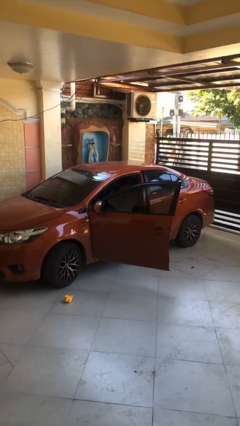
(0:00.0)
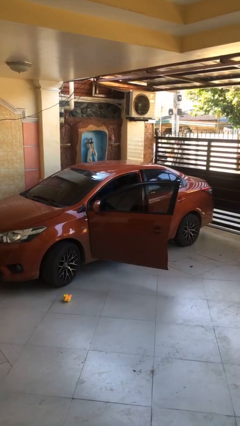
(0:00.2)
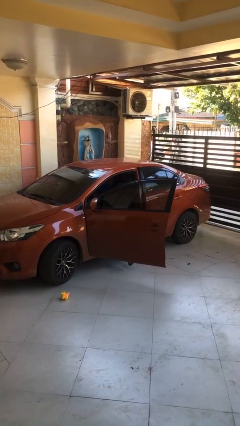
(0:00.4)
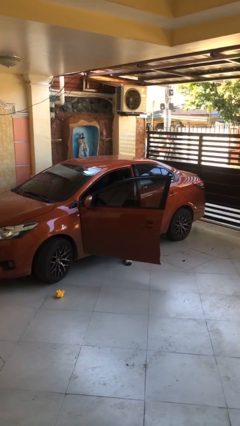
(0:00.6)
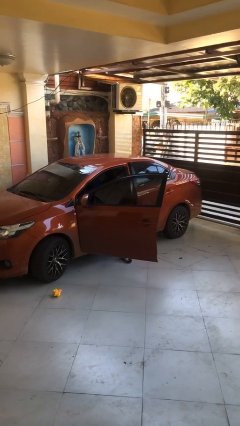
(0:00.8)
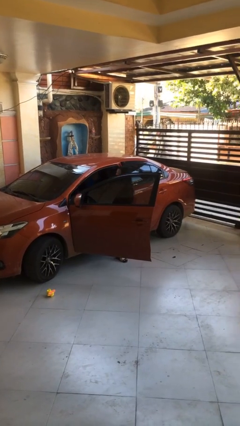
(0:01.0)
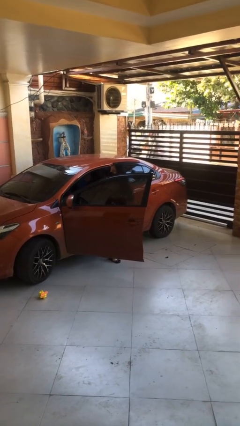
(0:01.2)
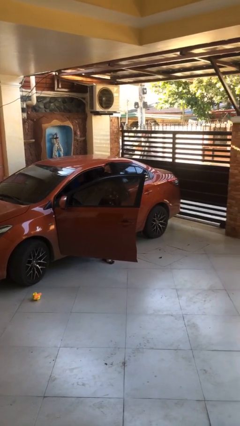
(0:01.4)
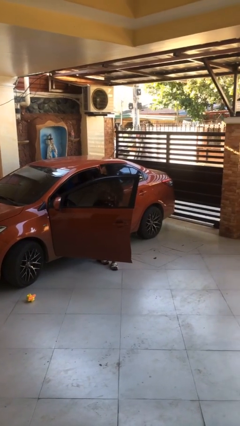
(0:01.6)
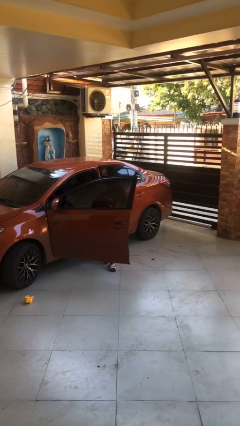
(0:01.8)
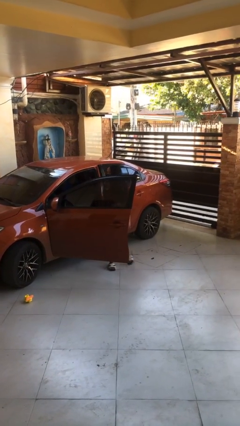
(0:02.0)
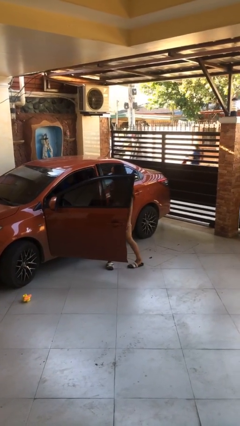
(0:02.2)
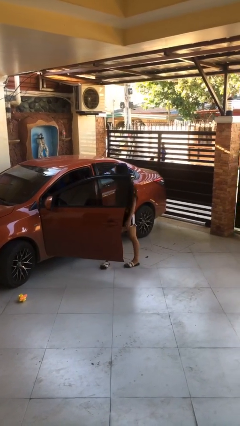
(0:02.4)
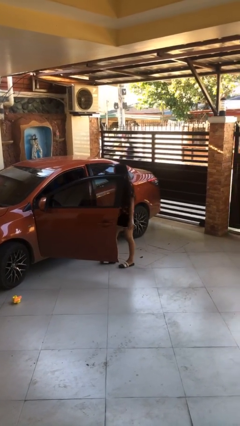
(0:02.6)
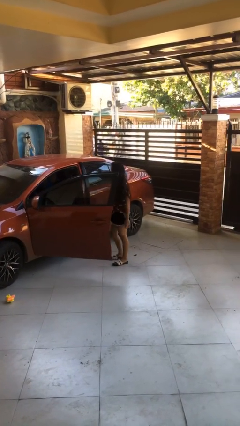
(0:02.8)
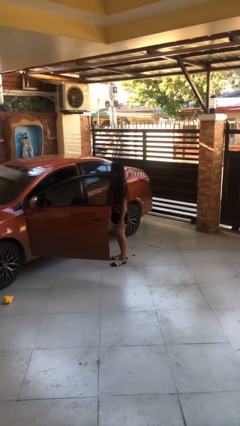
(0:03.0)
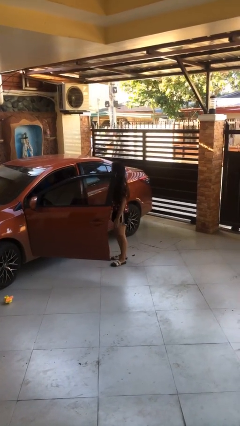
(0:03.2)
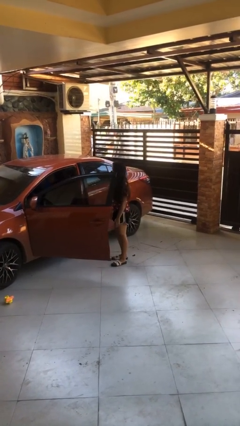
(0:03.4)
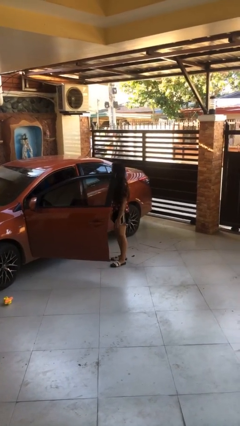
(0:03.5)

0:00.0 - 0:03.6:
person exits car

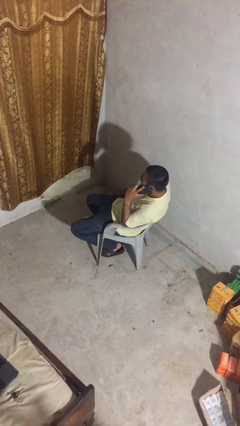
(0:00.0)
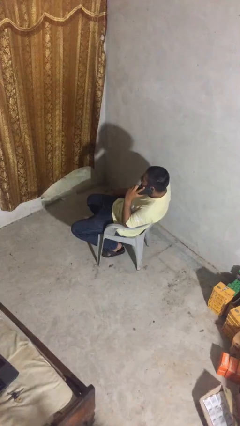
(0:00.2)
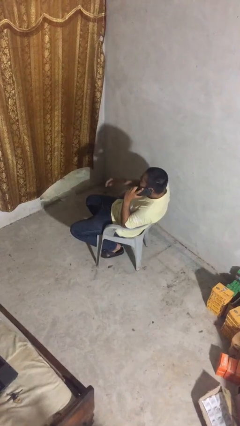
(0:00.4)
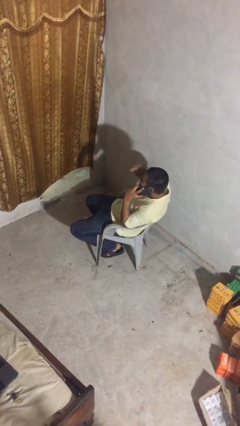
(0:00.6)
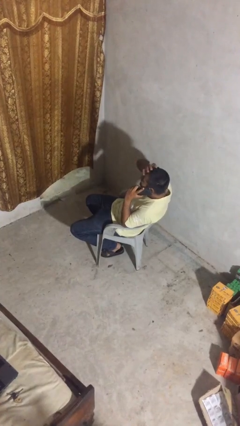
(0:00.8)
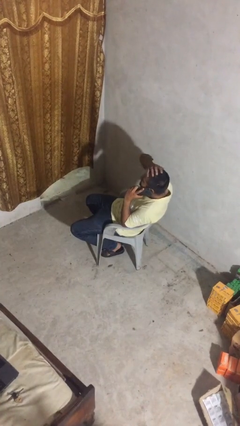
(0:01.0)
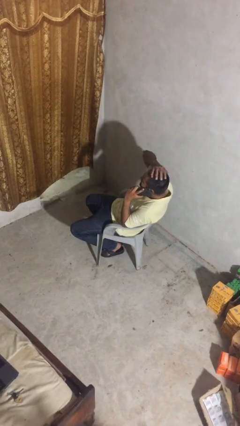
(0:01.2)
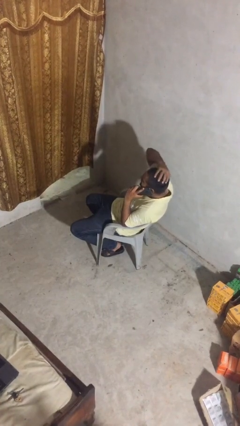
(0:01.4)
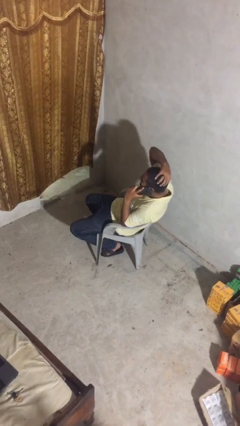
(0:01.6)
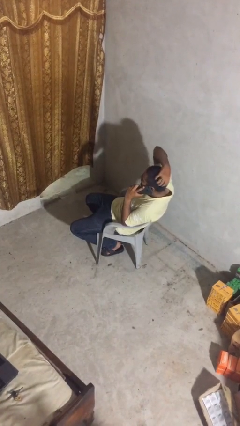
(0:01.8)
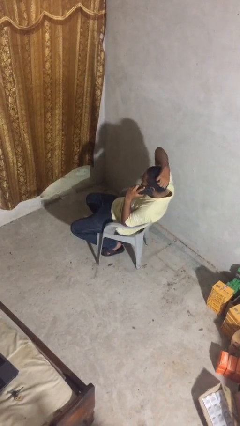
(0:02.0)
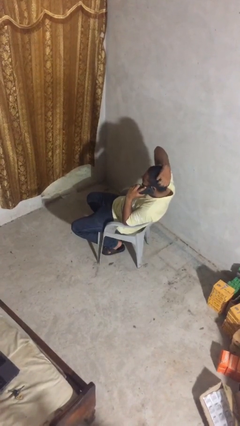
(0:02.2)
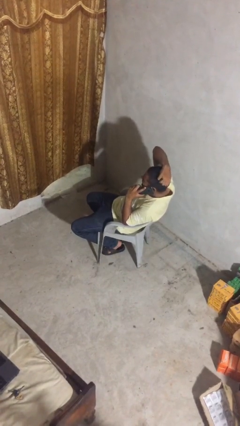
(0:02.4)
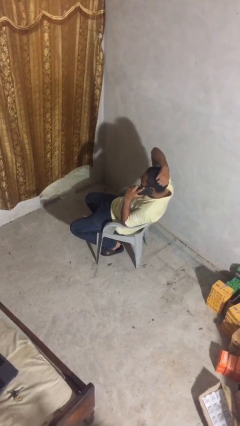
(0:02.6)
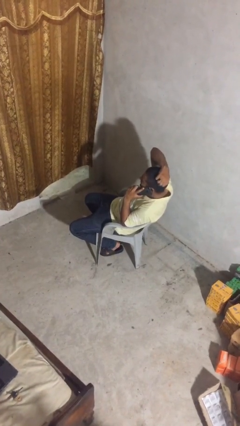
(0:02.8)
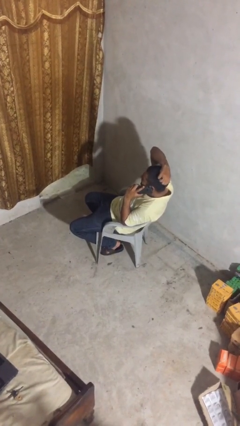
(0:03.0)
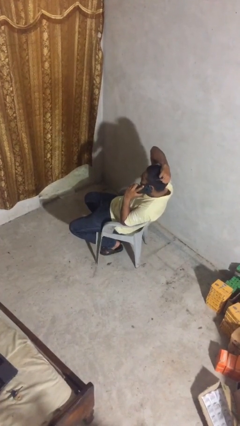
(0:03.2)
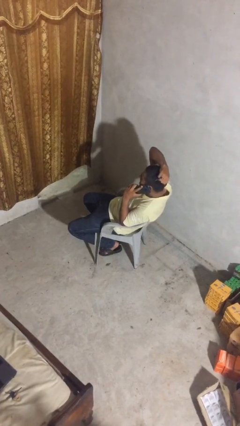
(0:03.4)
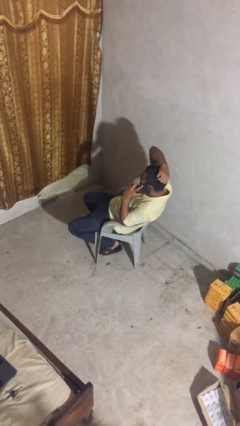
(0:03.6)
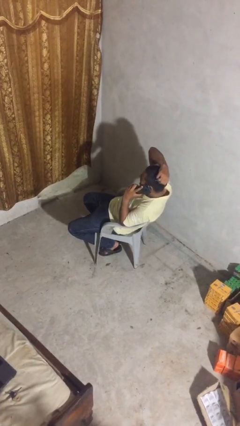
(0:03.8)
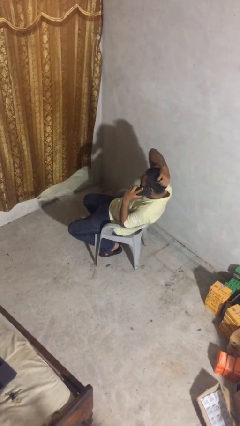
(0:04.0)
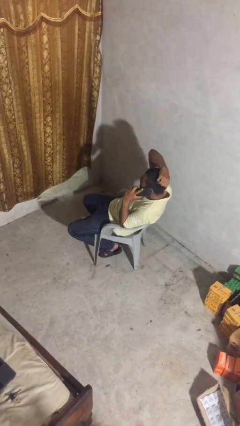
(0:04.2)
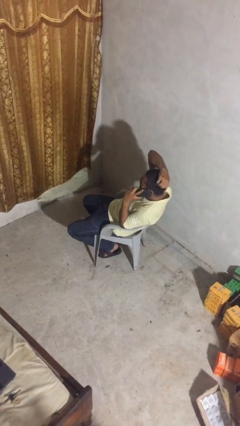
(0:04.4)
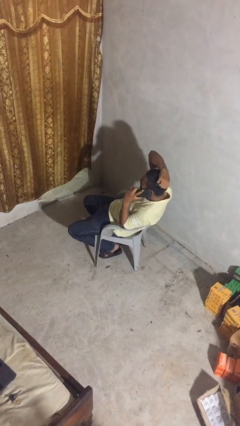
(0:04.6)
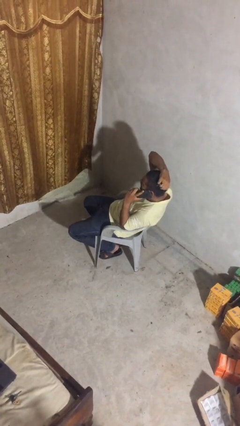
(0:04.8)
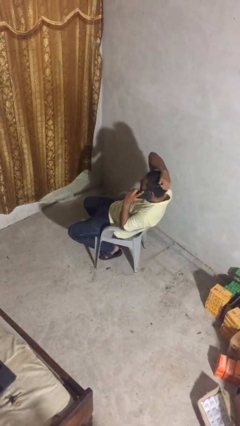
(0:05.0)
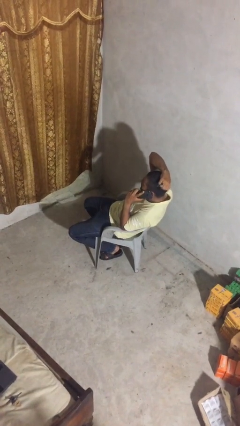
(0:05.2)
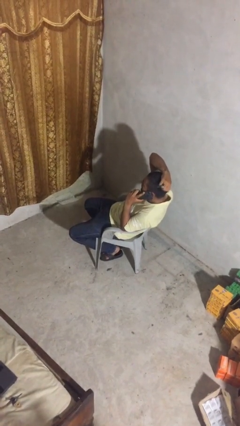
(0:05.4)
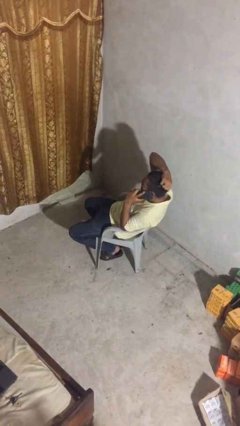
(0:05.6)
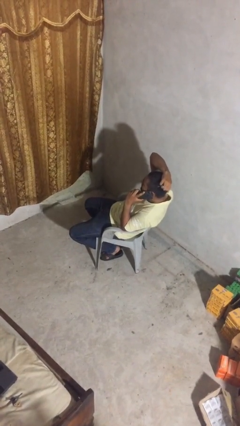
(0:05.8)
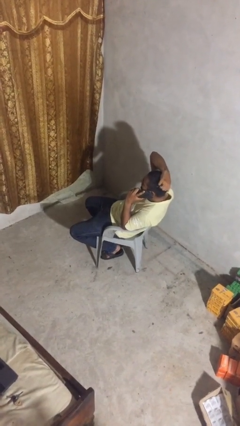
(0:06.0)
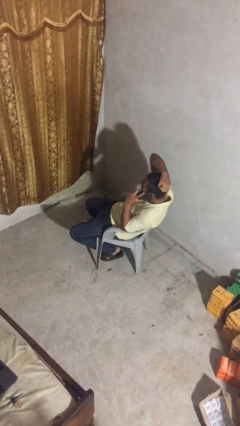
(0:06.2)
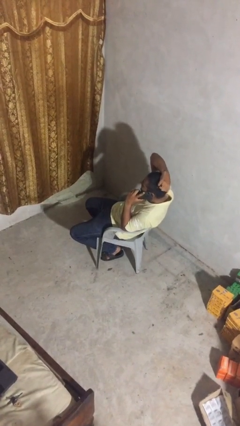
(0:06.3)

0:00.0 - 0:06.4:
person talks on phone

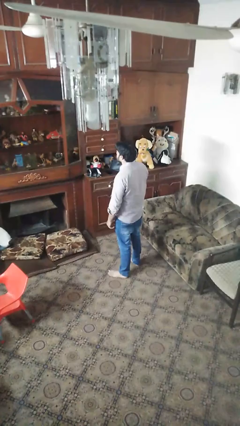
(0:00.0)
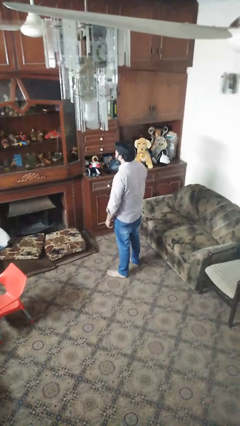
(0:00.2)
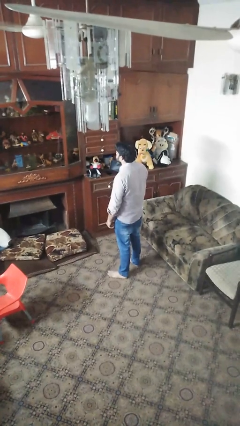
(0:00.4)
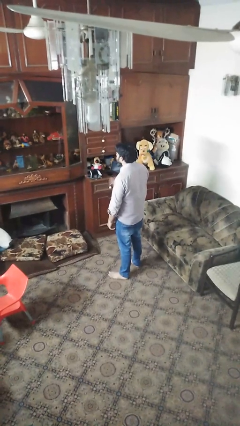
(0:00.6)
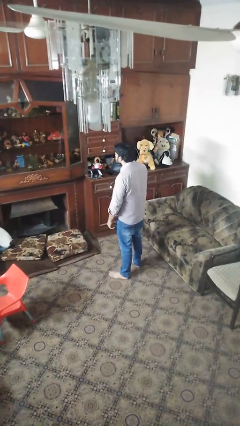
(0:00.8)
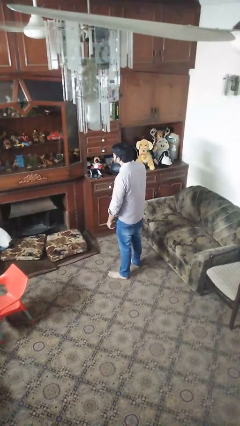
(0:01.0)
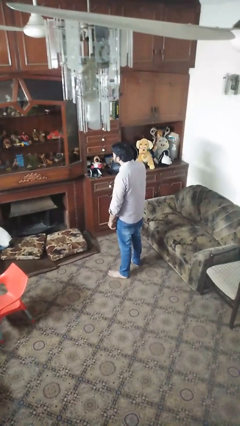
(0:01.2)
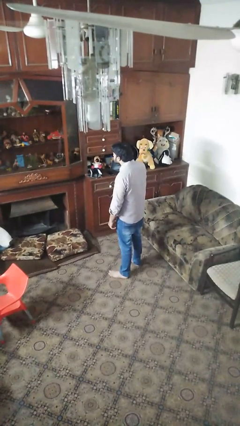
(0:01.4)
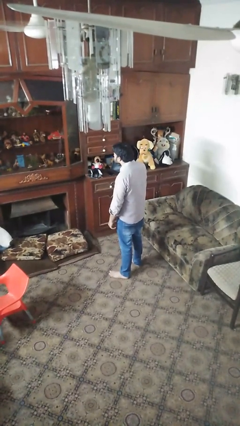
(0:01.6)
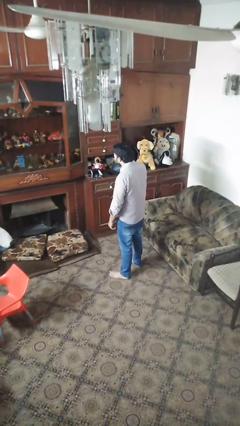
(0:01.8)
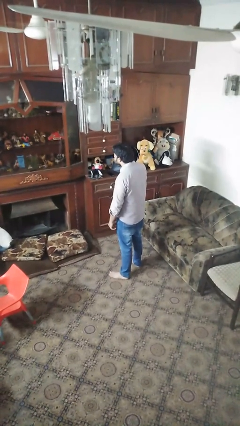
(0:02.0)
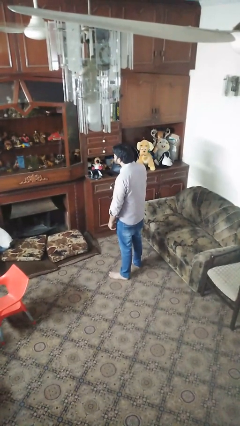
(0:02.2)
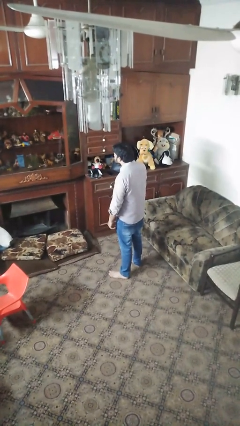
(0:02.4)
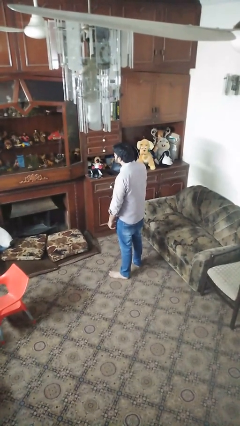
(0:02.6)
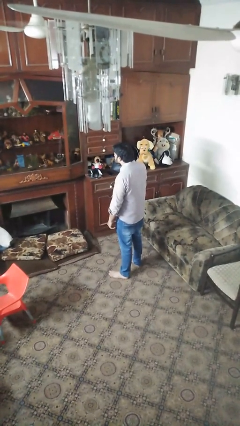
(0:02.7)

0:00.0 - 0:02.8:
person gestures listen closely

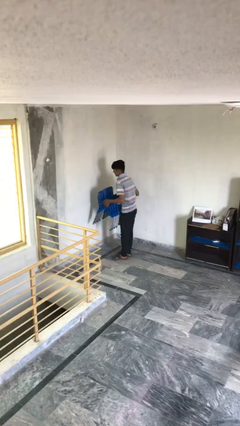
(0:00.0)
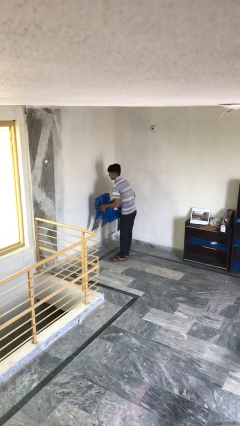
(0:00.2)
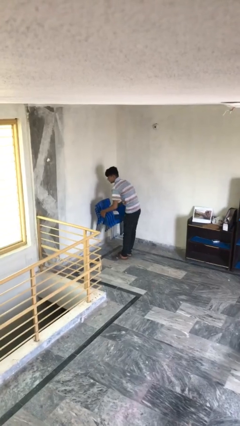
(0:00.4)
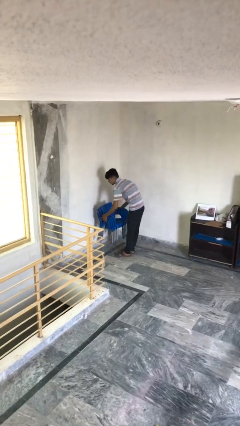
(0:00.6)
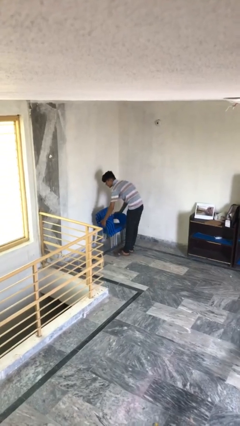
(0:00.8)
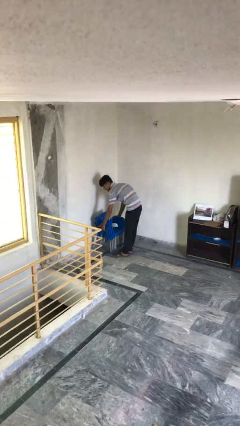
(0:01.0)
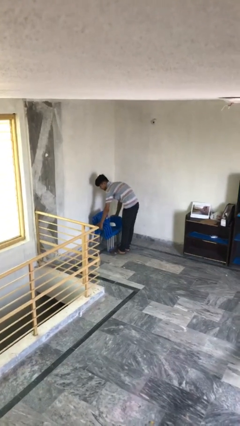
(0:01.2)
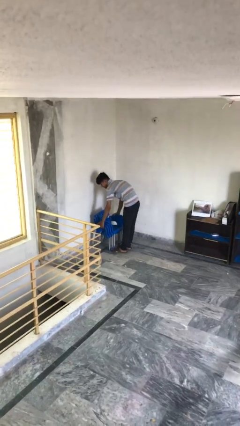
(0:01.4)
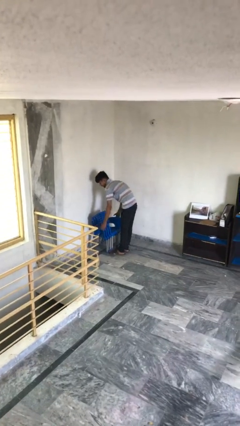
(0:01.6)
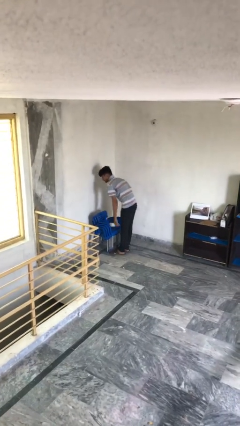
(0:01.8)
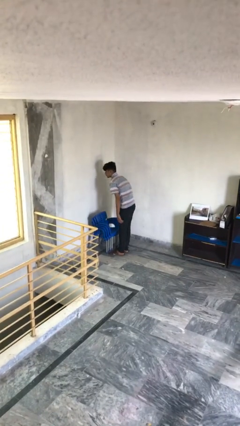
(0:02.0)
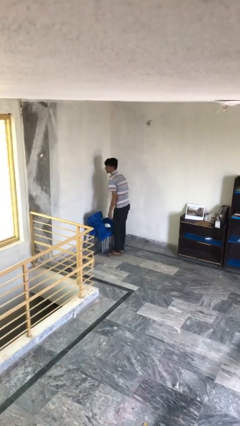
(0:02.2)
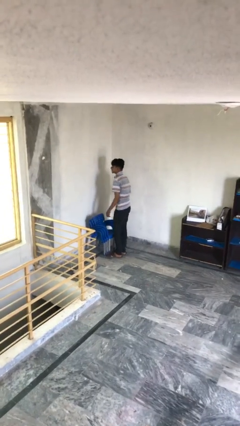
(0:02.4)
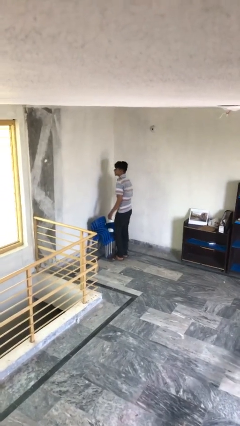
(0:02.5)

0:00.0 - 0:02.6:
person puts down object on floor

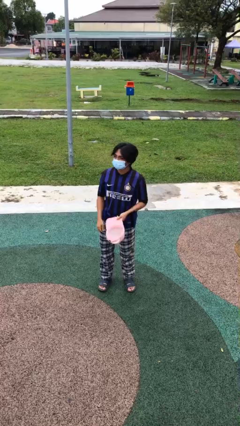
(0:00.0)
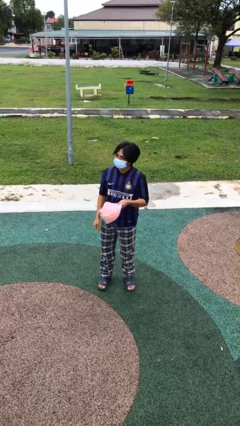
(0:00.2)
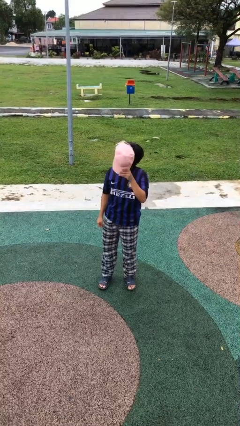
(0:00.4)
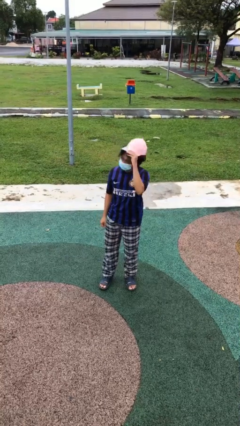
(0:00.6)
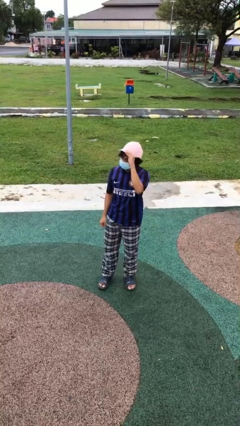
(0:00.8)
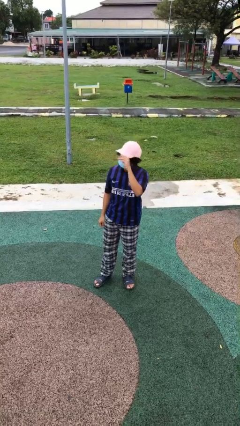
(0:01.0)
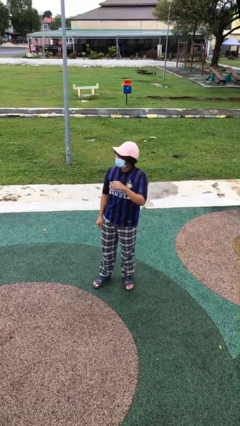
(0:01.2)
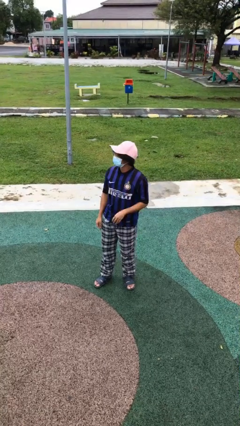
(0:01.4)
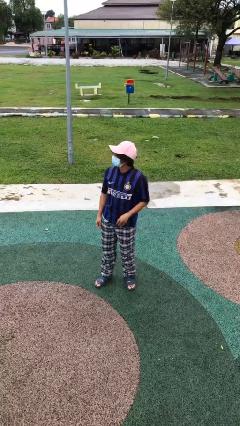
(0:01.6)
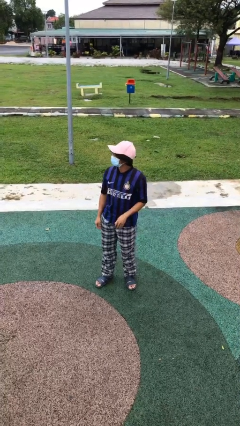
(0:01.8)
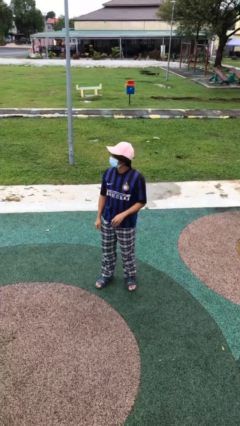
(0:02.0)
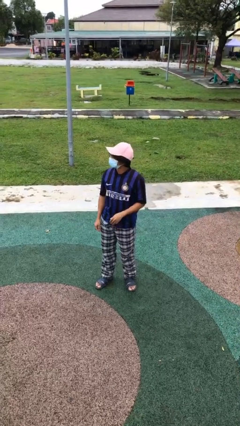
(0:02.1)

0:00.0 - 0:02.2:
person puts on hat
